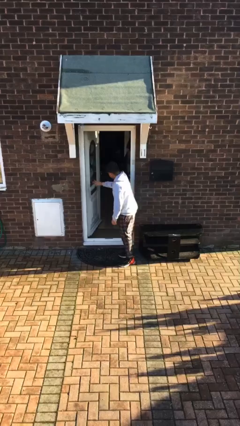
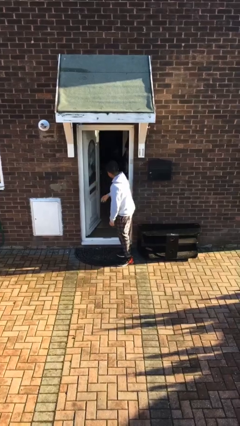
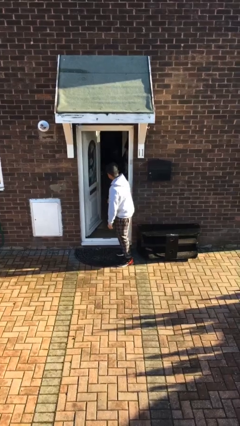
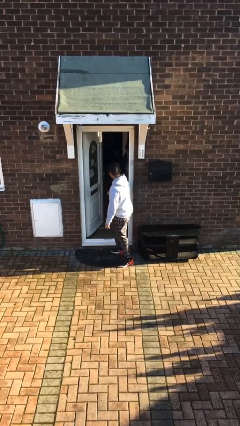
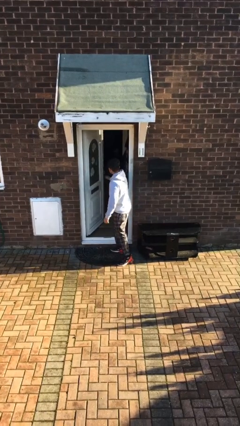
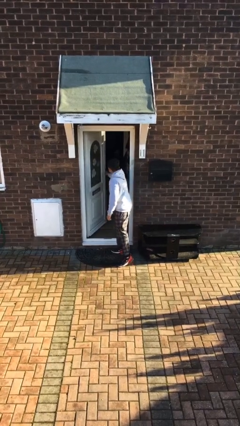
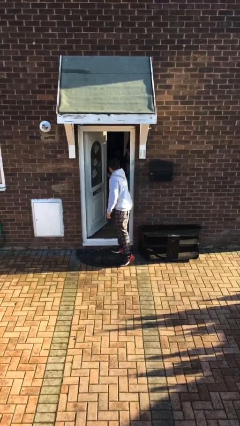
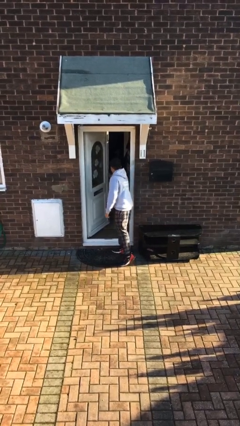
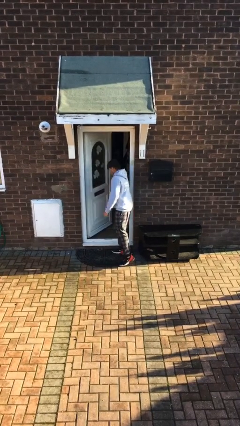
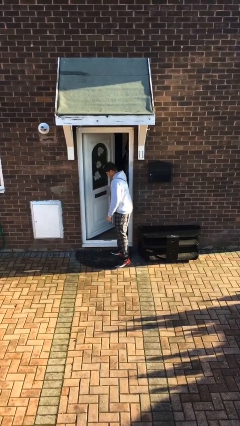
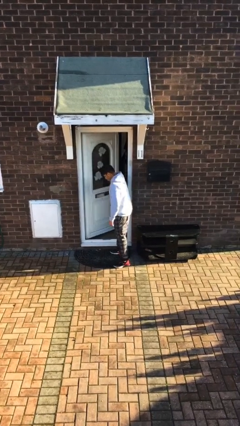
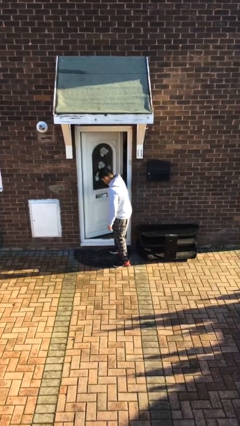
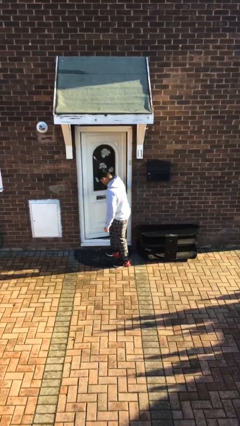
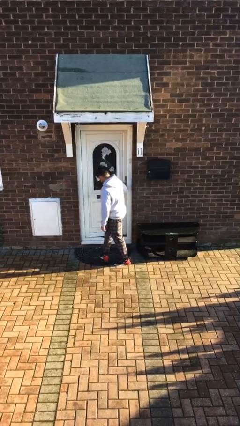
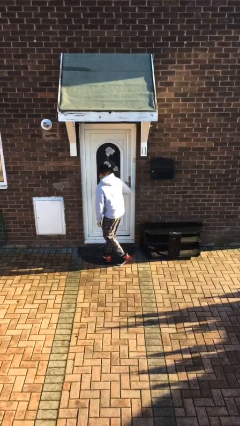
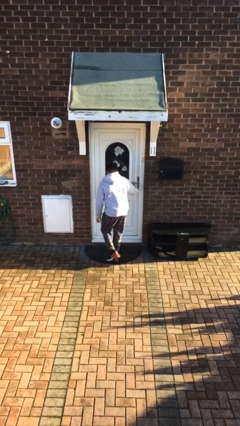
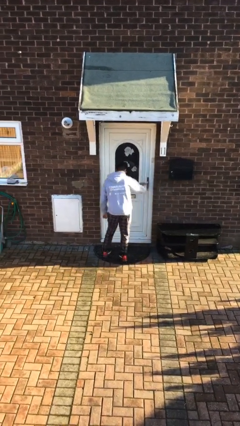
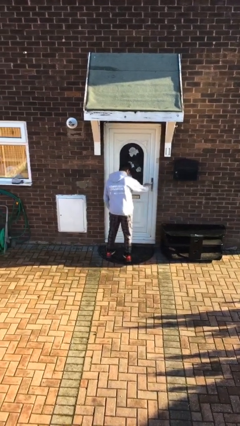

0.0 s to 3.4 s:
person closes facility door

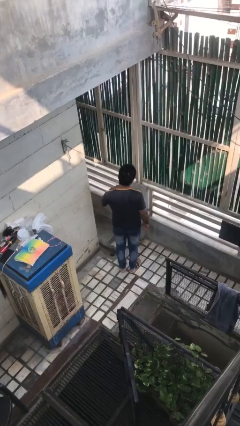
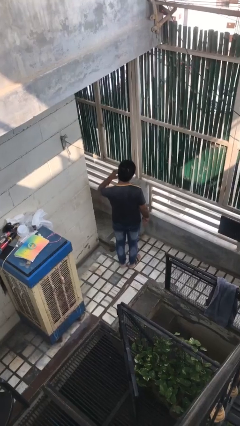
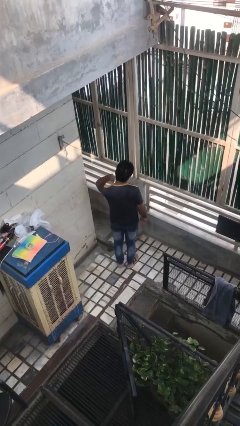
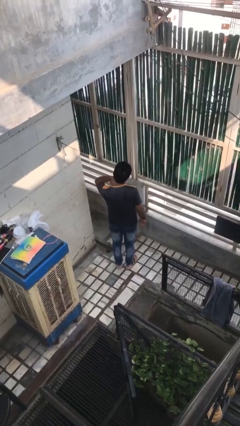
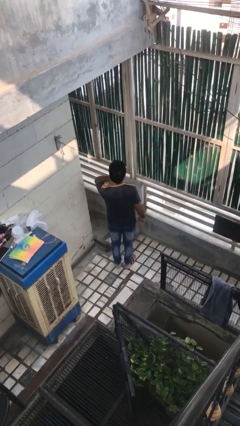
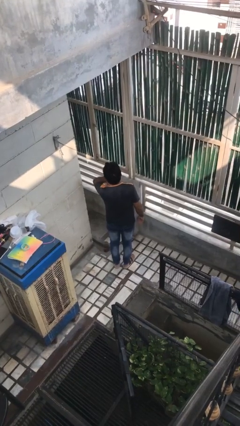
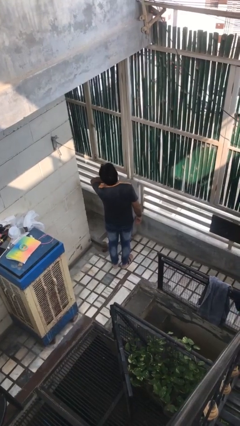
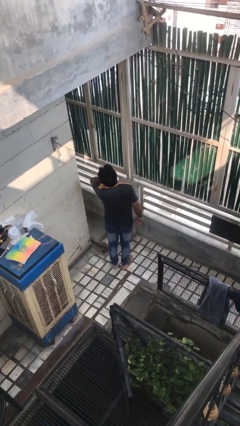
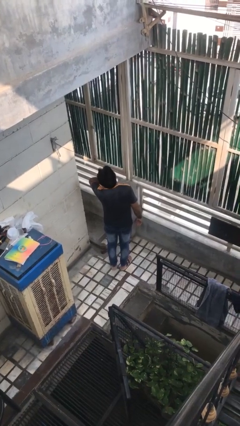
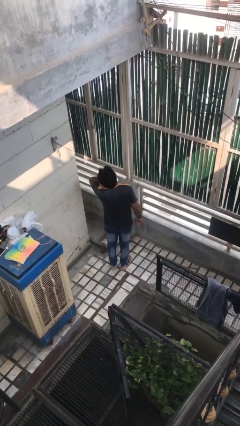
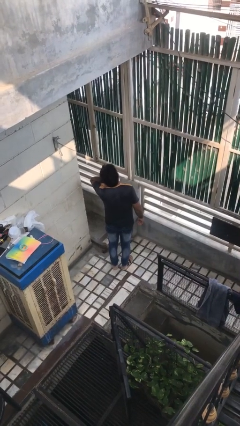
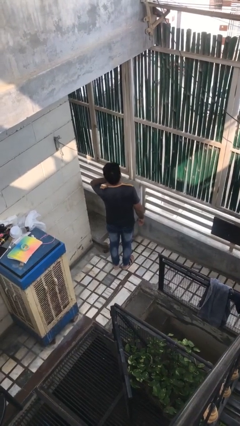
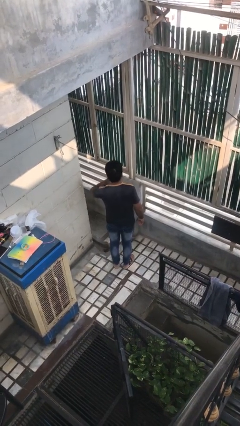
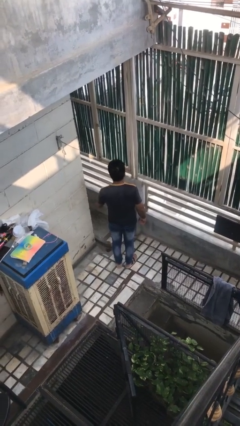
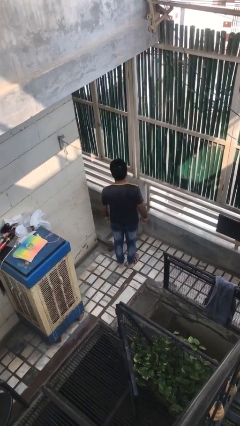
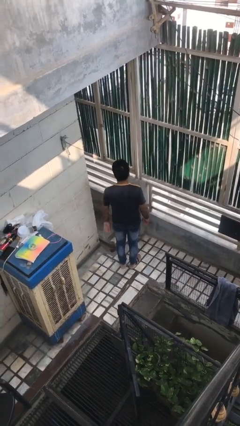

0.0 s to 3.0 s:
person rubs neck

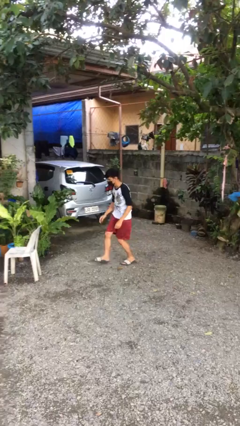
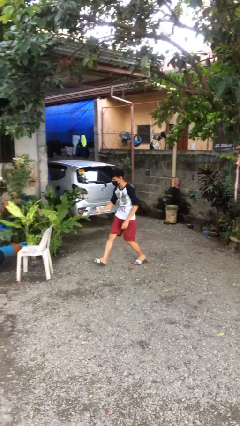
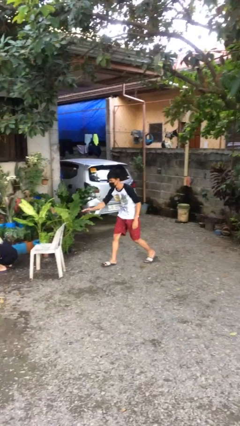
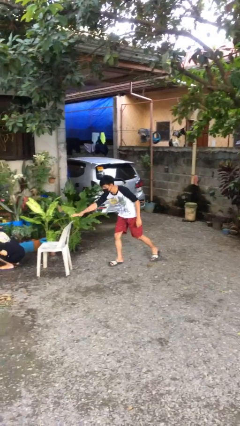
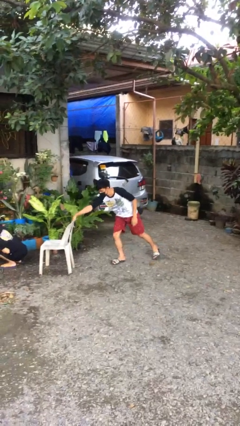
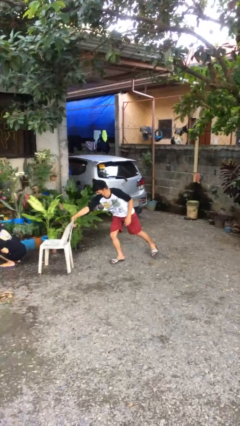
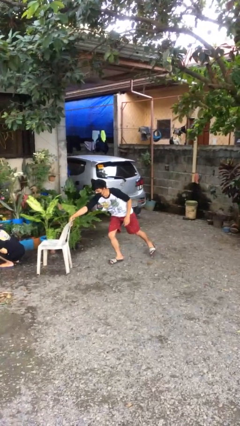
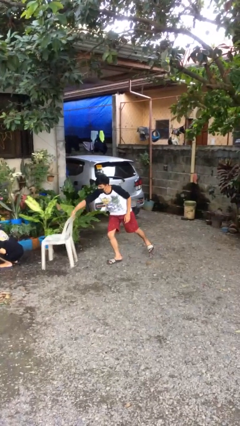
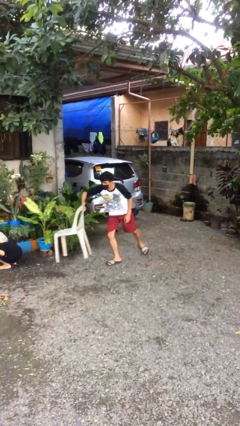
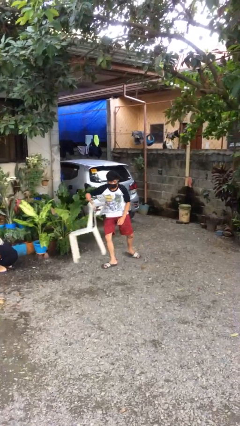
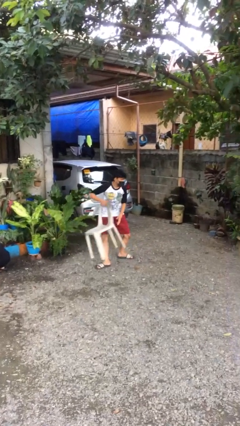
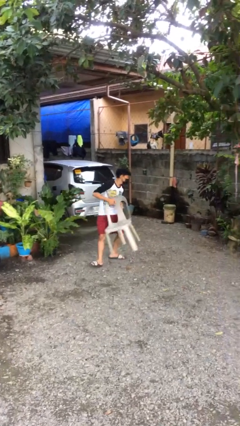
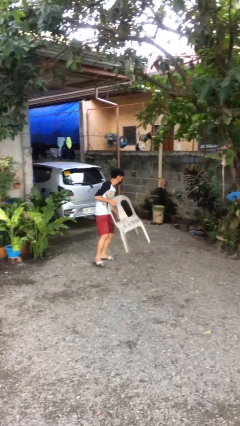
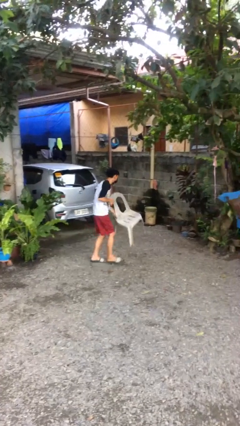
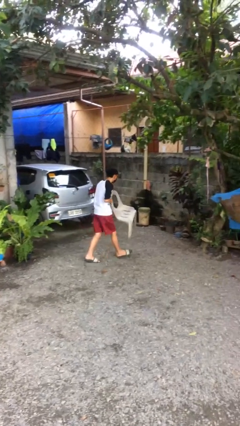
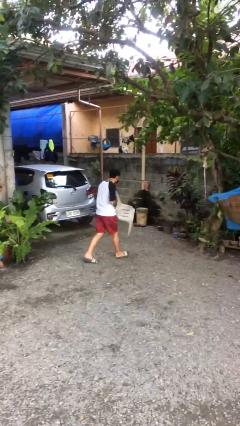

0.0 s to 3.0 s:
person steals object from person

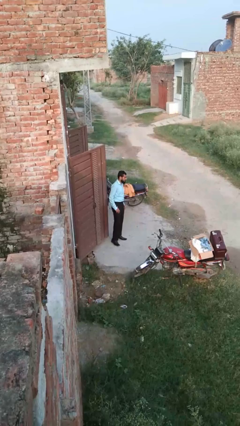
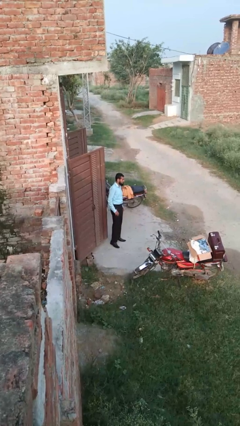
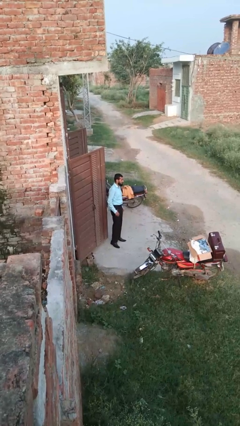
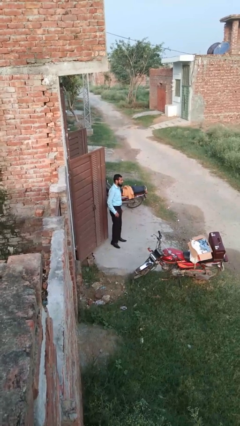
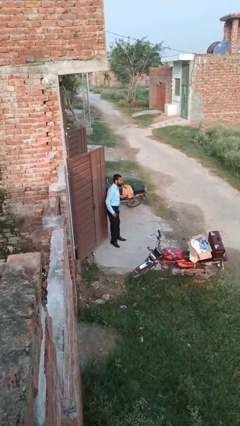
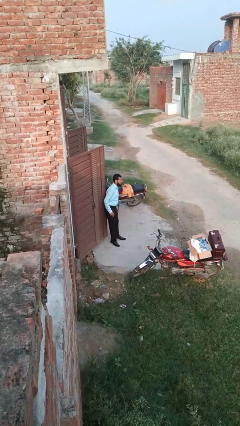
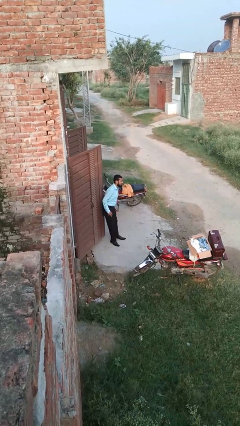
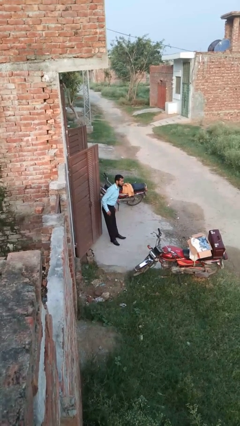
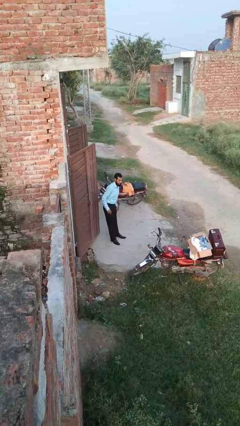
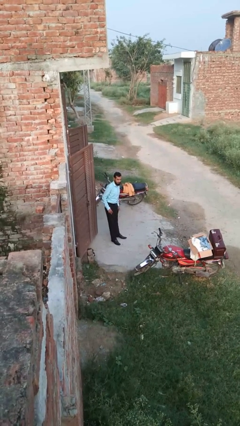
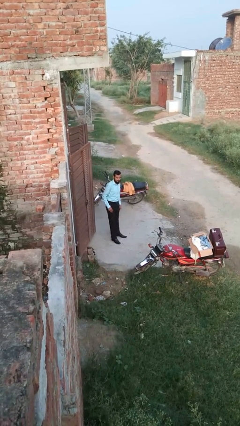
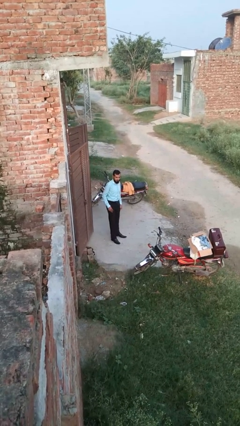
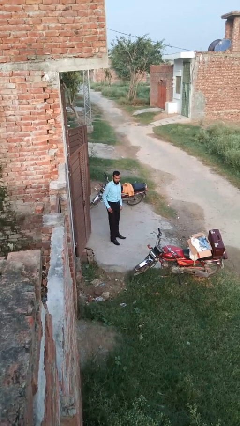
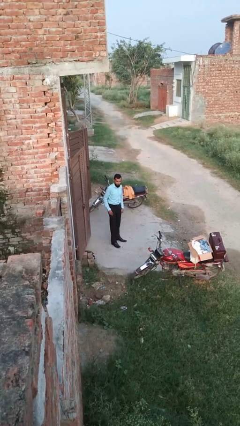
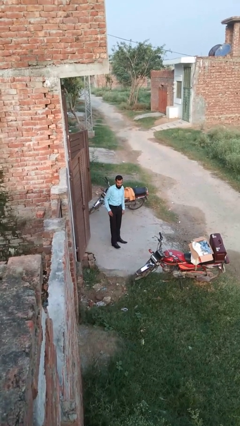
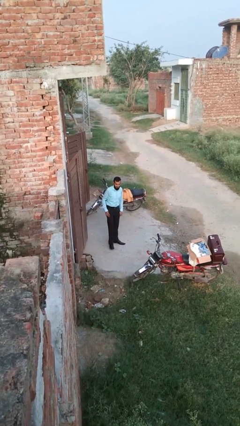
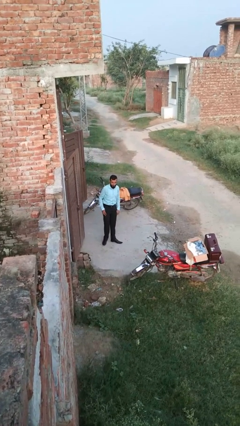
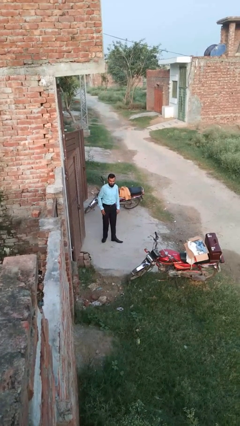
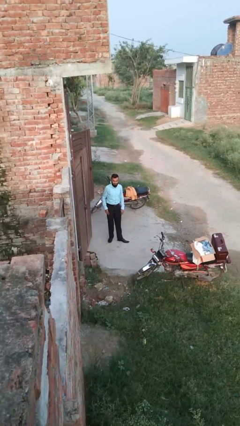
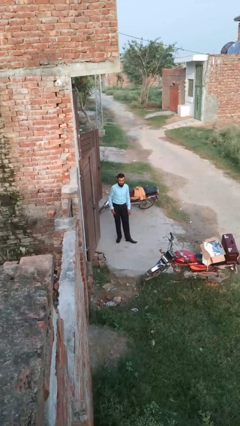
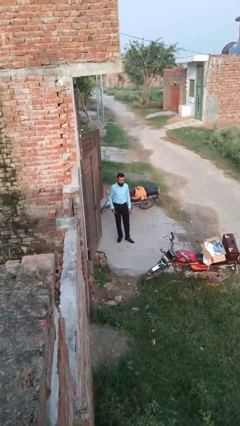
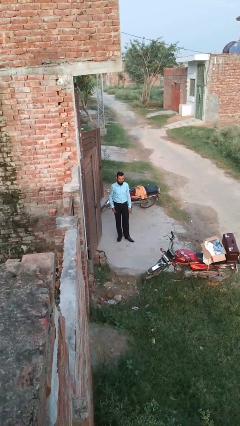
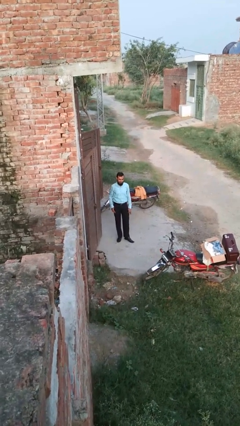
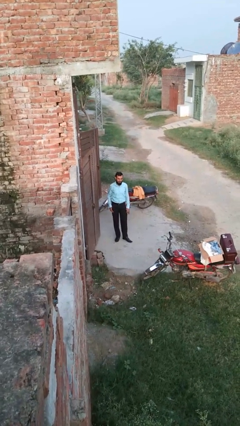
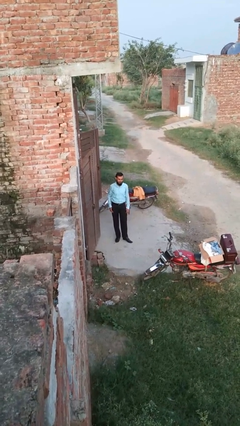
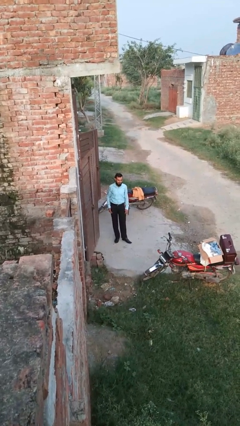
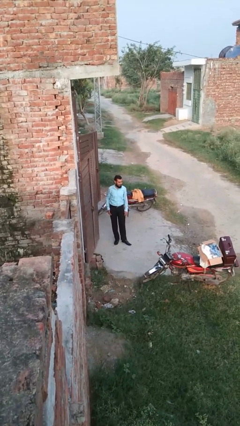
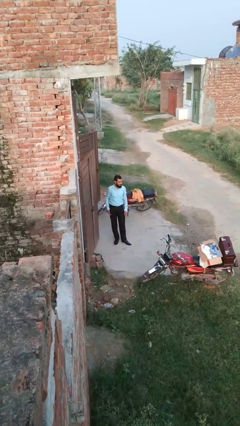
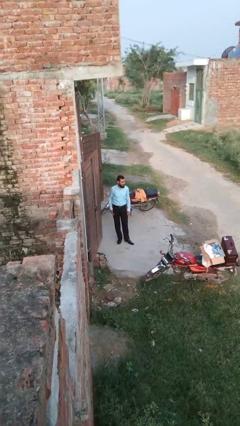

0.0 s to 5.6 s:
person closes door with hip

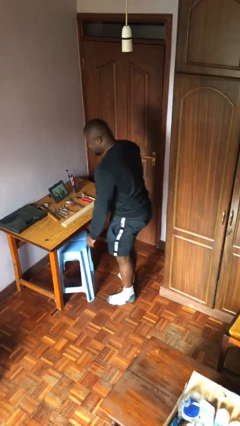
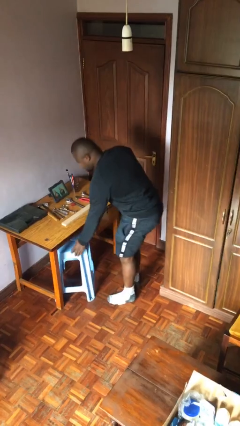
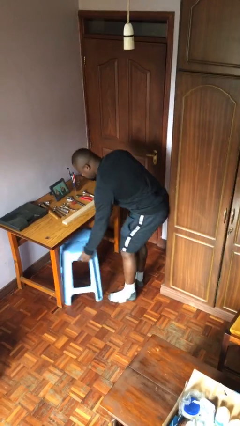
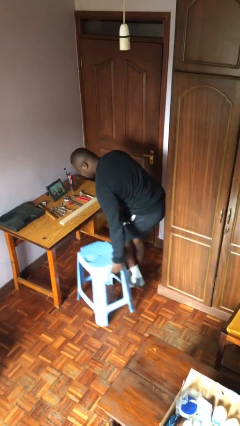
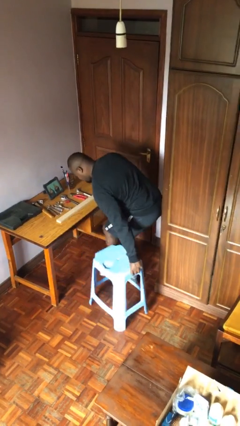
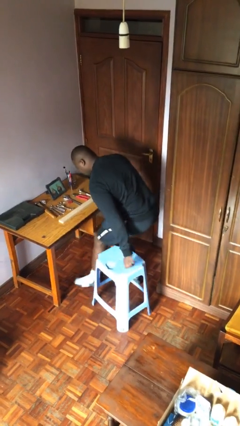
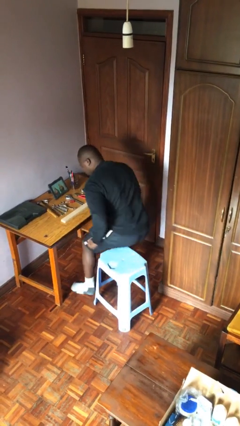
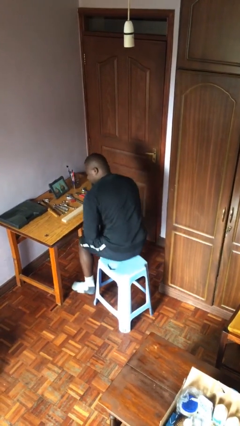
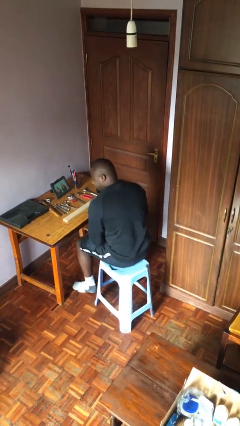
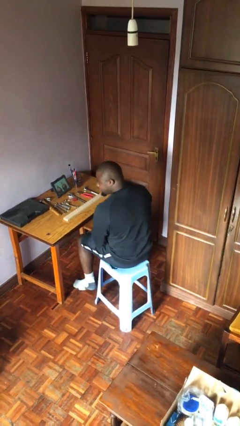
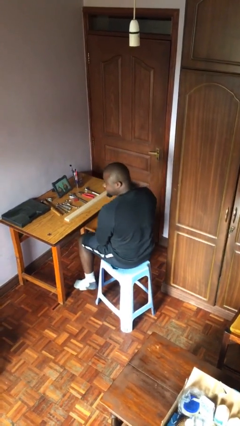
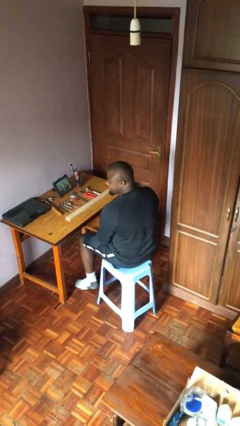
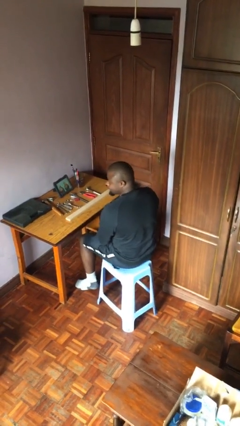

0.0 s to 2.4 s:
person sits down
